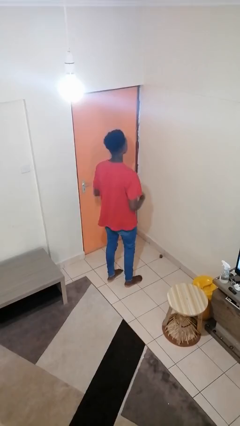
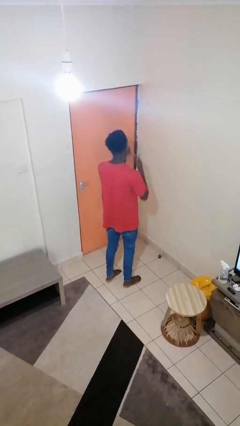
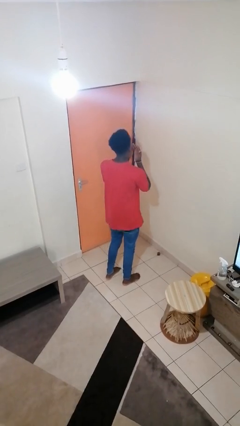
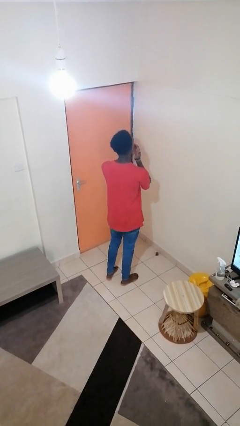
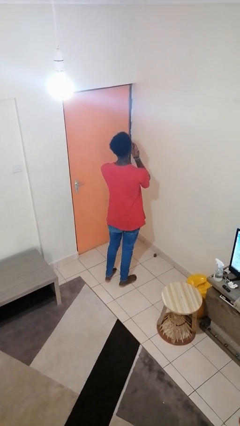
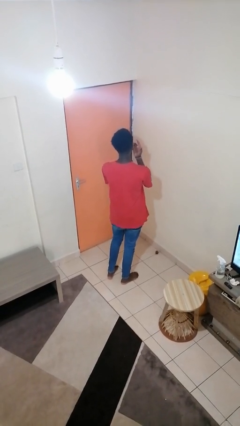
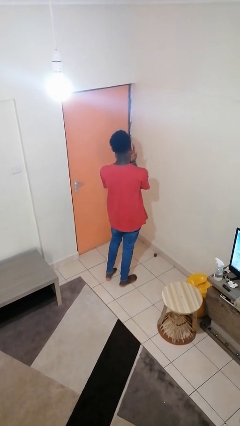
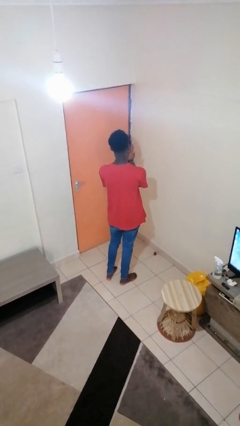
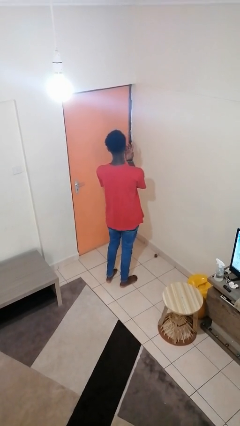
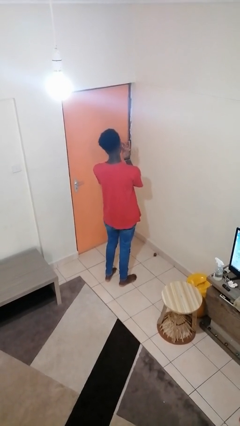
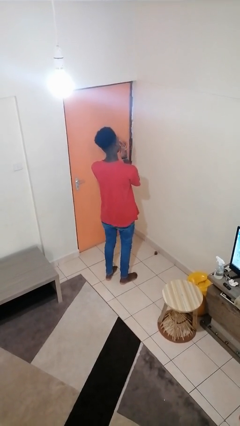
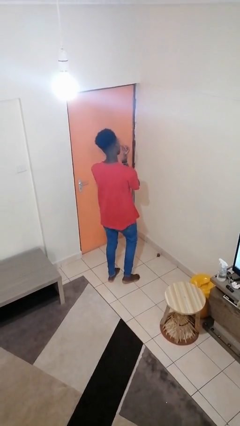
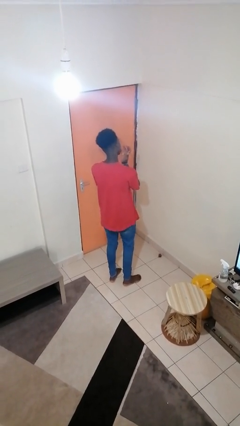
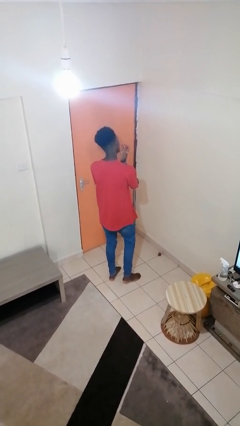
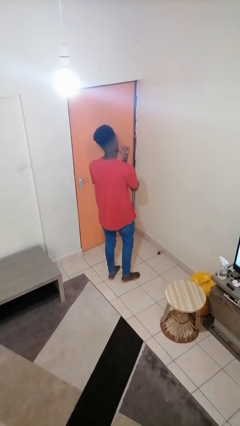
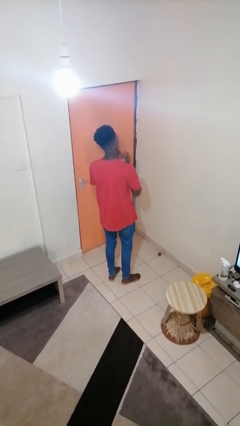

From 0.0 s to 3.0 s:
person licks fingers

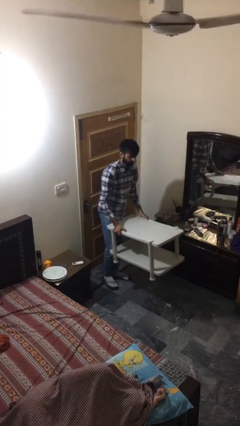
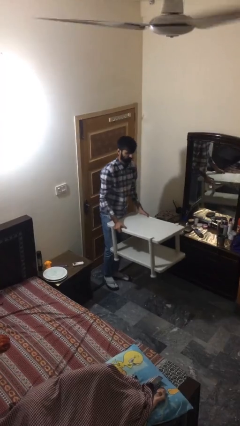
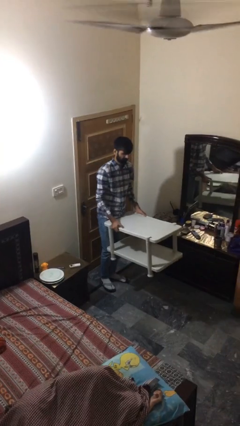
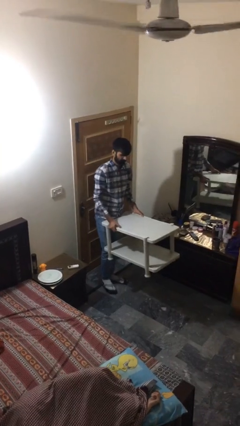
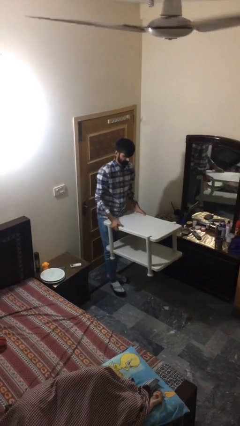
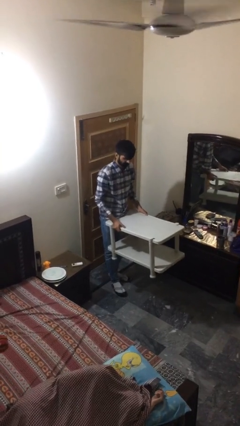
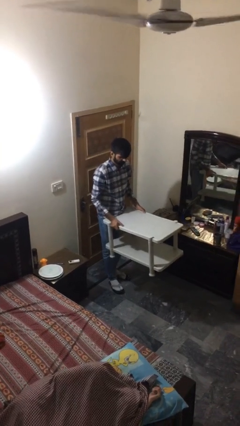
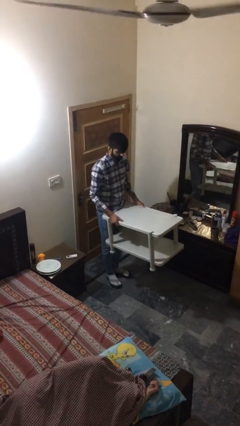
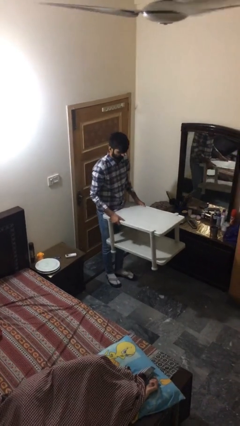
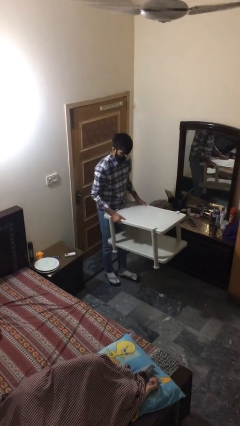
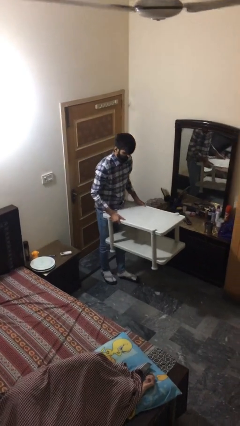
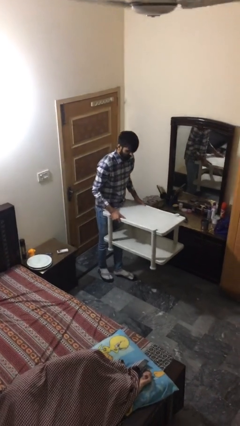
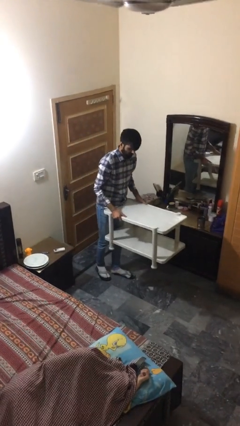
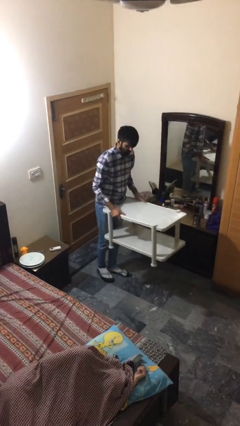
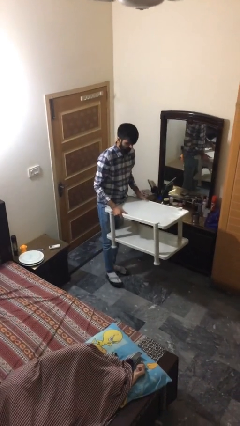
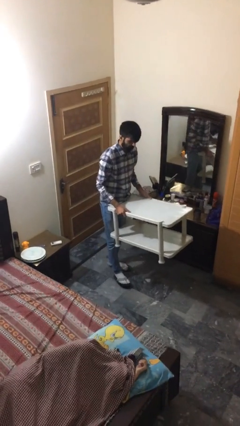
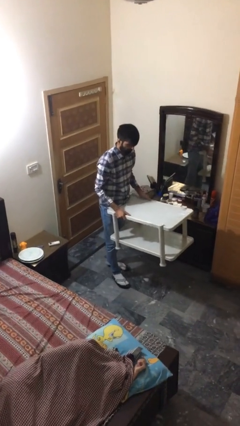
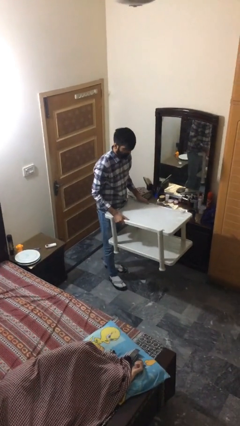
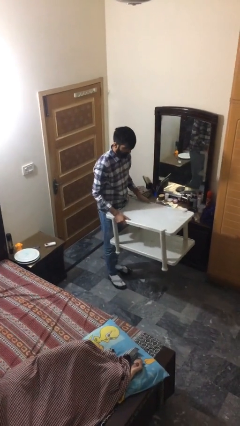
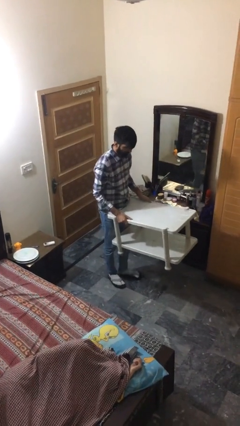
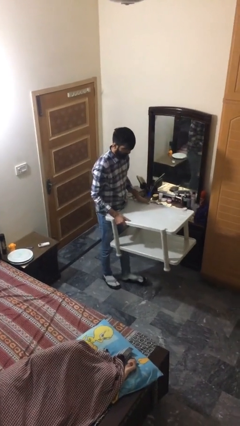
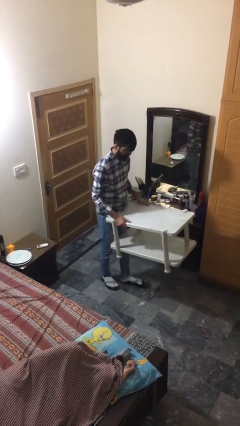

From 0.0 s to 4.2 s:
person carries heavy object

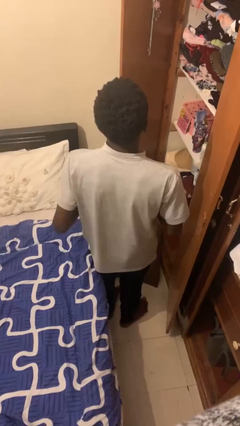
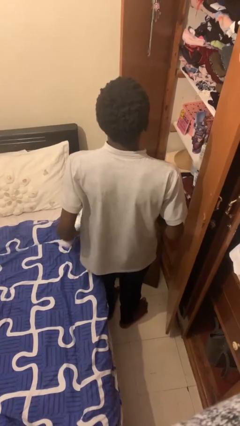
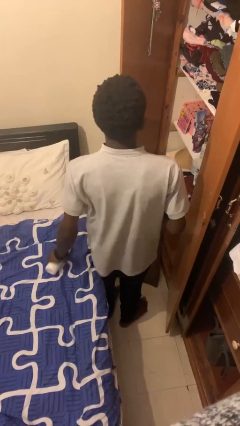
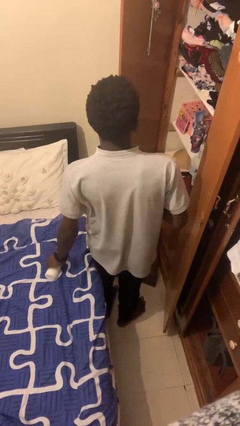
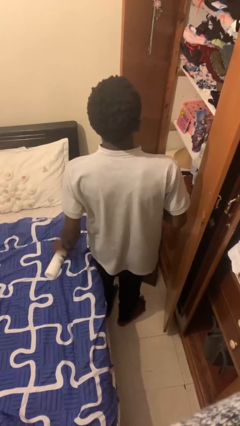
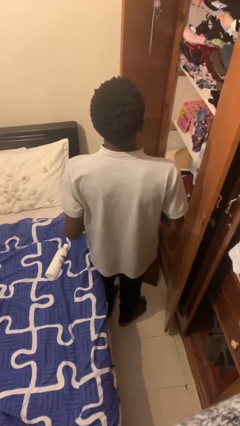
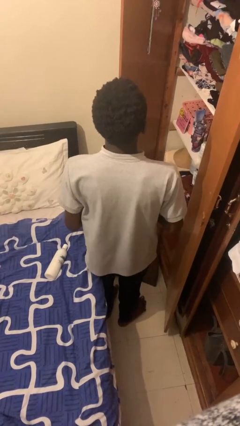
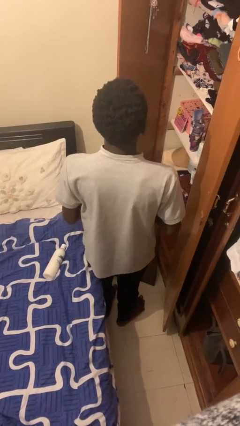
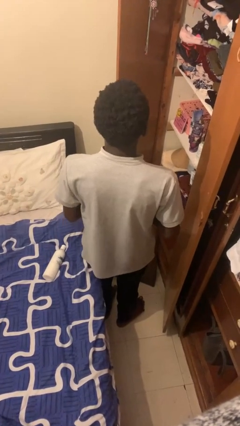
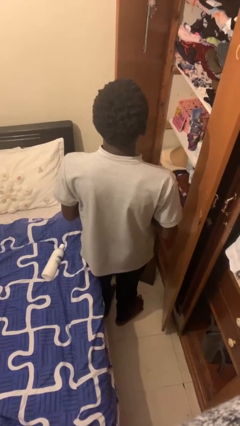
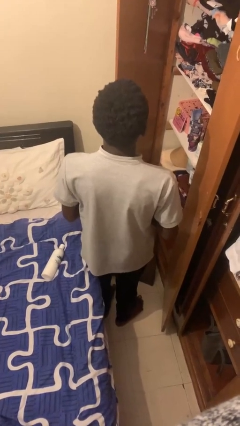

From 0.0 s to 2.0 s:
person puts down object into cabinet

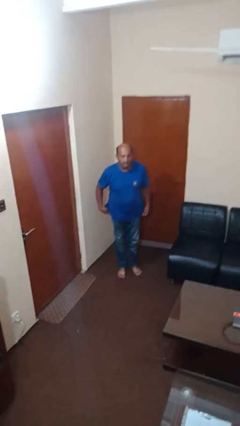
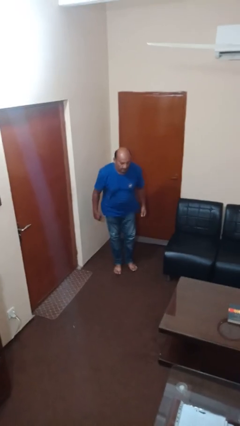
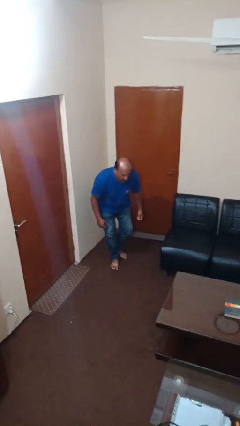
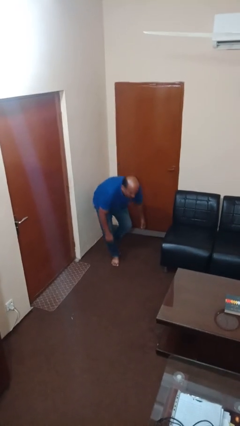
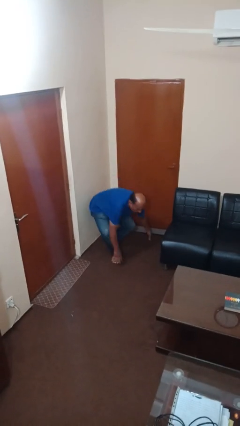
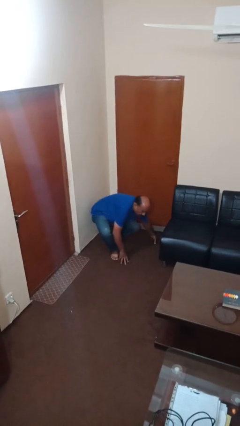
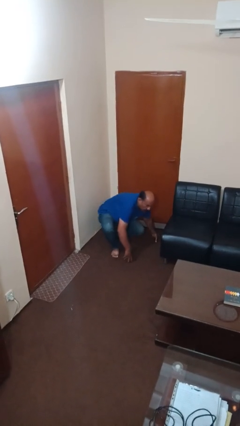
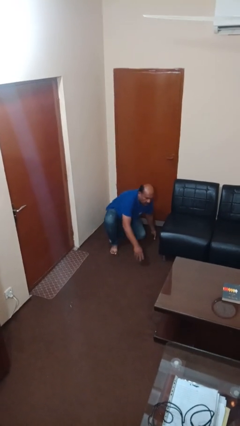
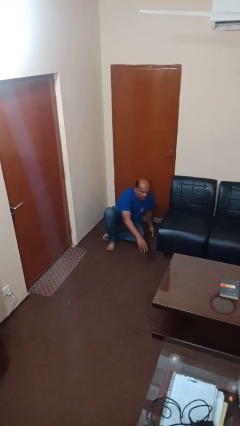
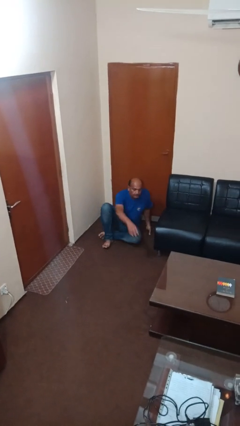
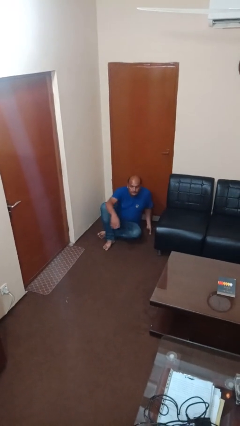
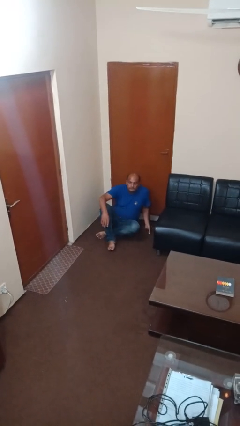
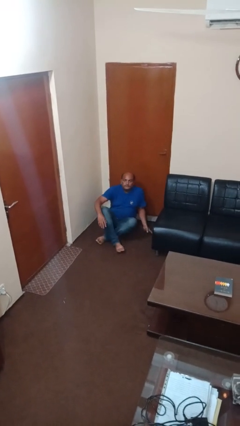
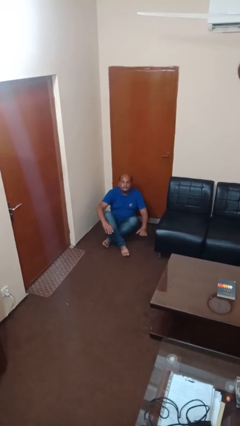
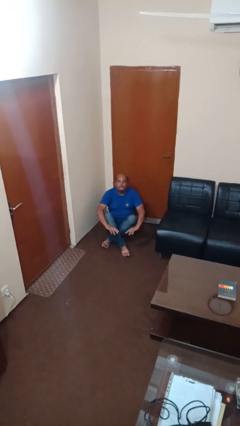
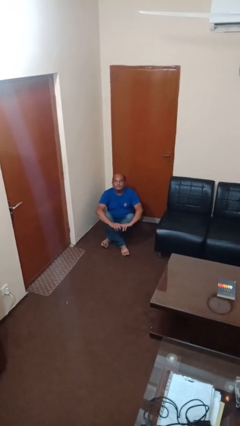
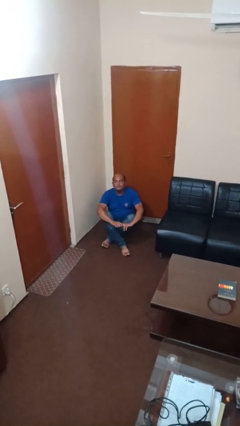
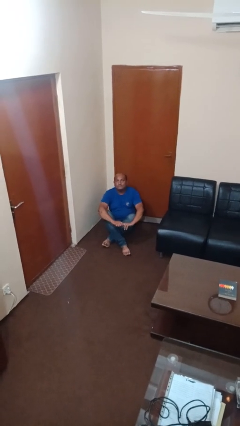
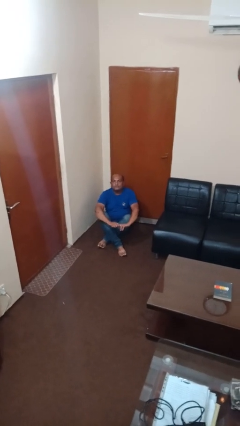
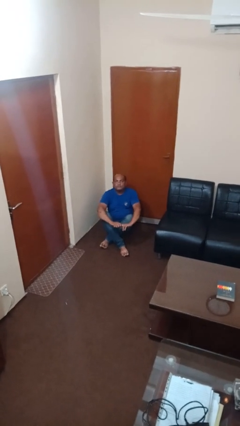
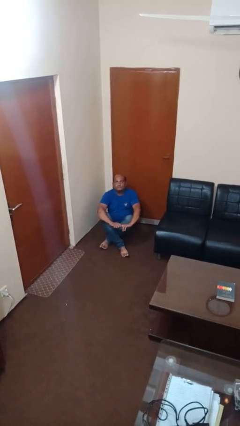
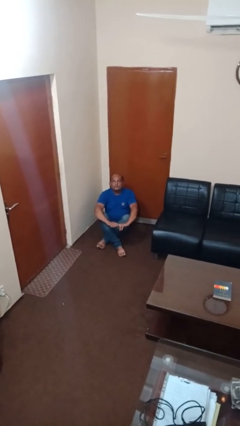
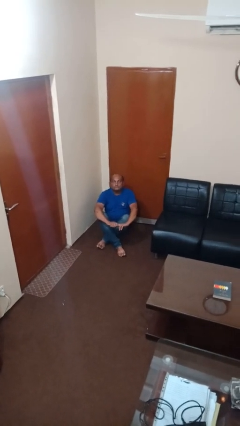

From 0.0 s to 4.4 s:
person sits crisscross

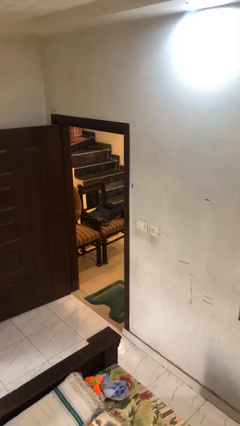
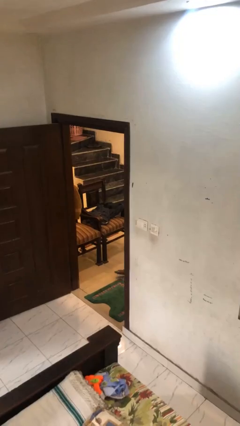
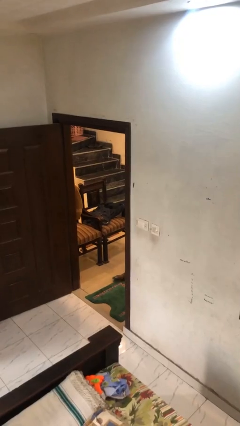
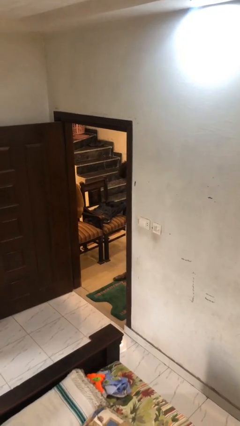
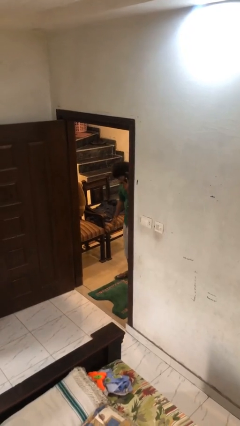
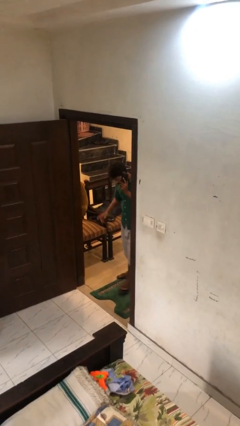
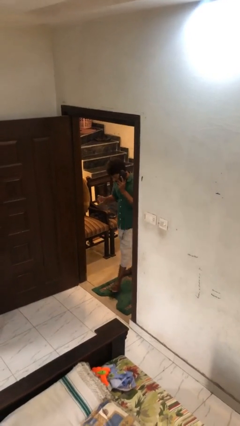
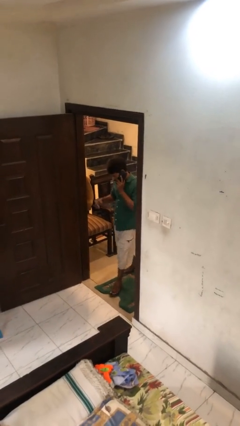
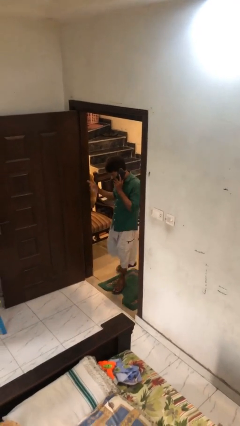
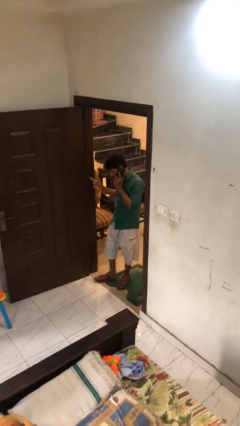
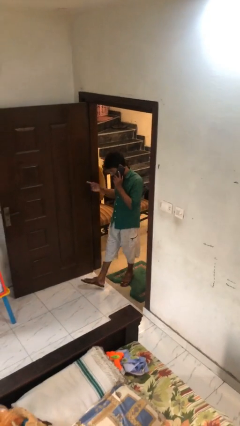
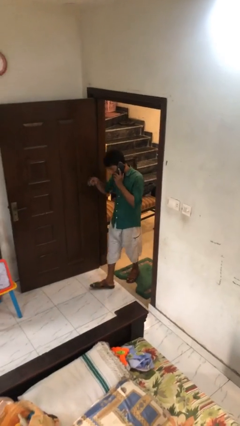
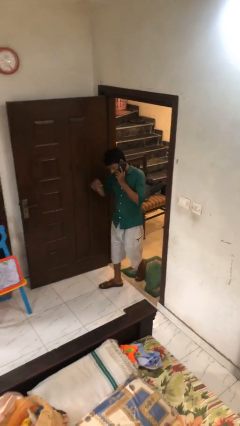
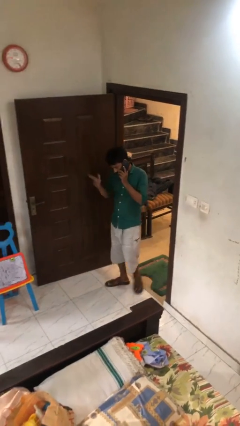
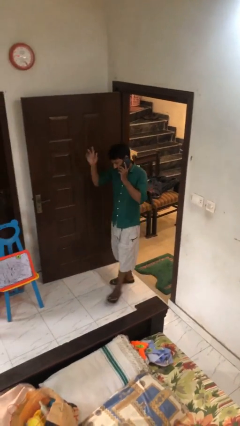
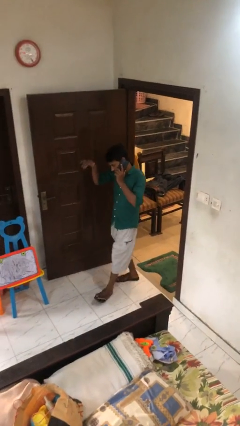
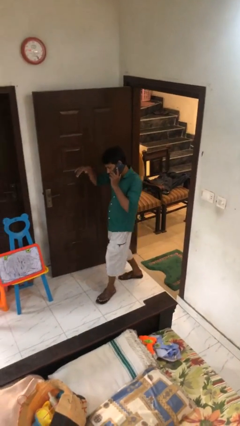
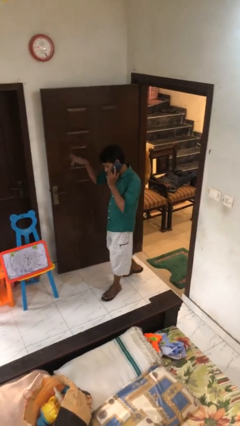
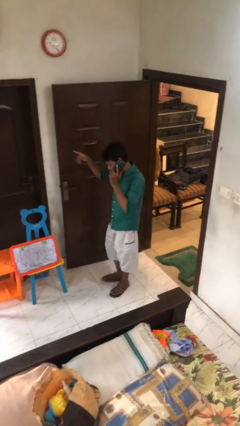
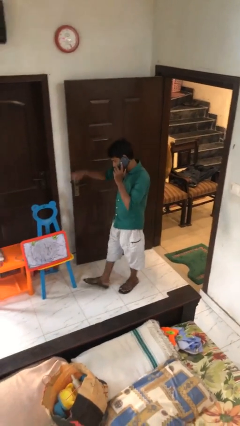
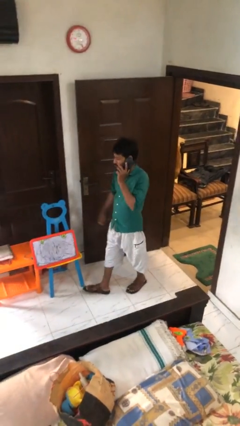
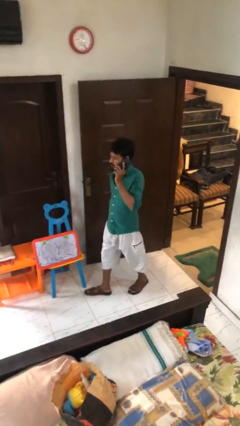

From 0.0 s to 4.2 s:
person enters scene through structure
